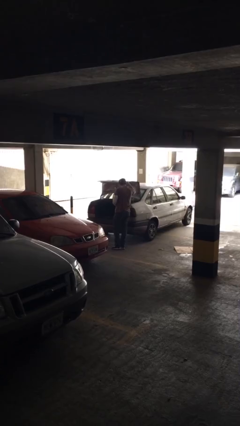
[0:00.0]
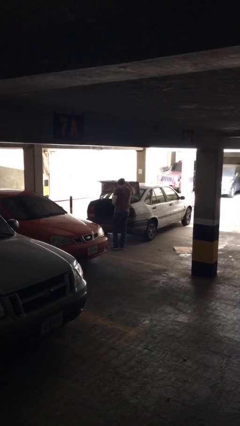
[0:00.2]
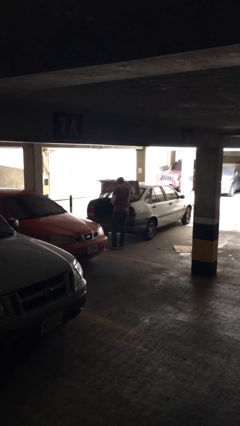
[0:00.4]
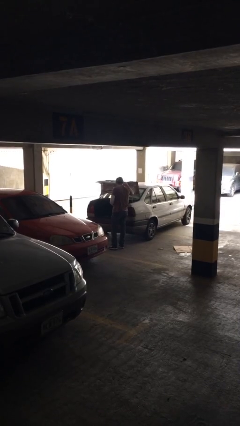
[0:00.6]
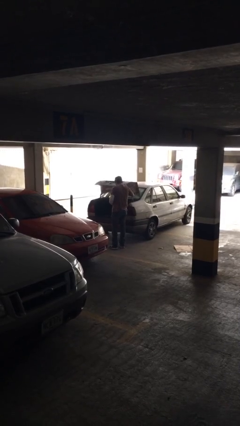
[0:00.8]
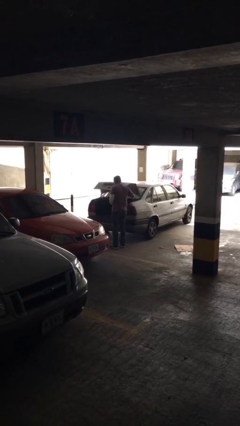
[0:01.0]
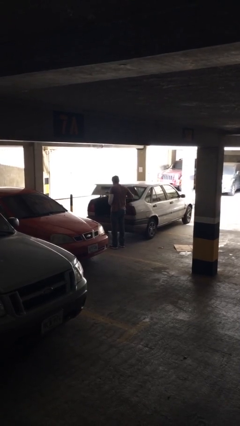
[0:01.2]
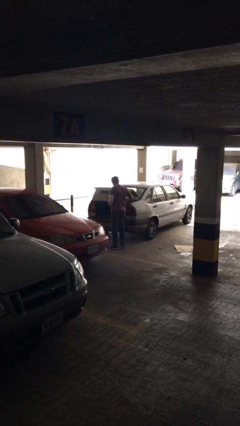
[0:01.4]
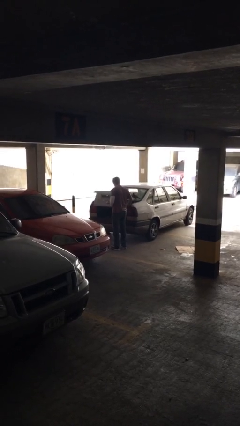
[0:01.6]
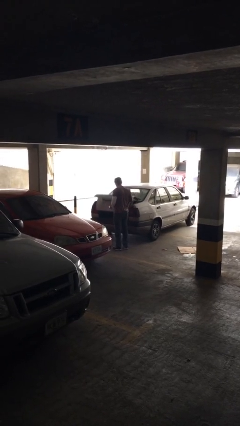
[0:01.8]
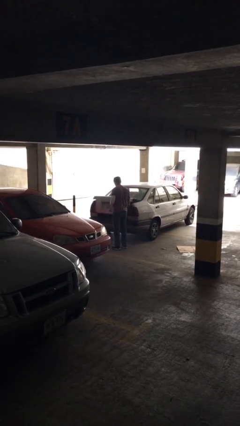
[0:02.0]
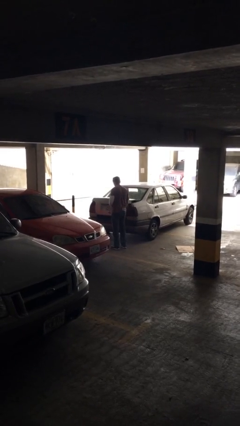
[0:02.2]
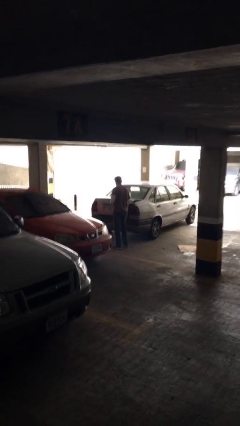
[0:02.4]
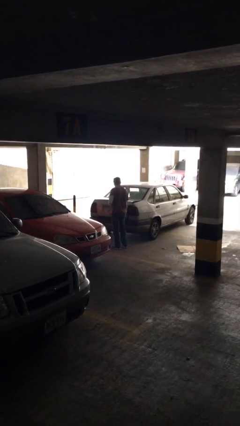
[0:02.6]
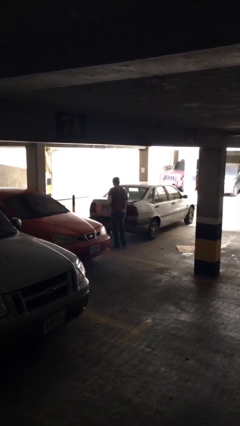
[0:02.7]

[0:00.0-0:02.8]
person closes car trunk

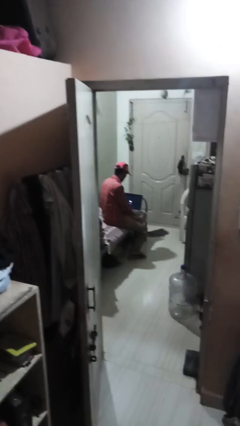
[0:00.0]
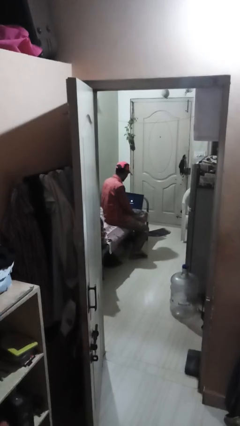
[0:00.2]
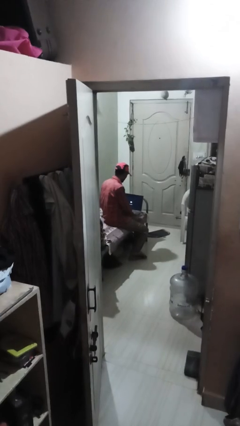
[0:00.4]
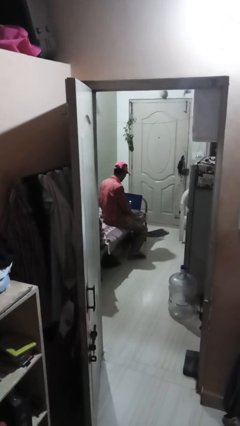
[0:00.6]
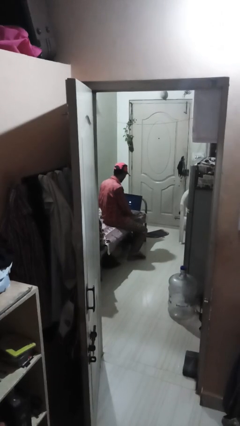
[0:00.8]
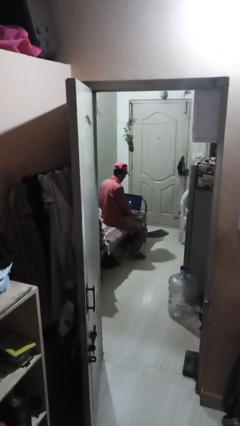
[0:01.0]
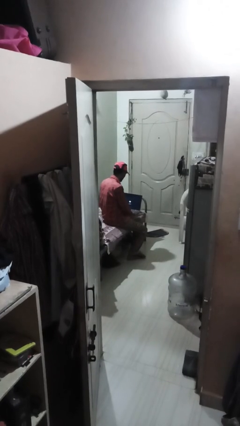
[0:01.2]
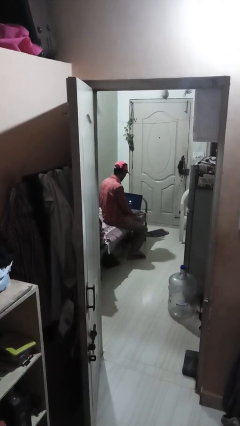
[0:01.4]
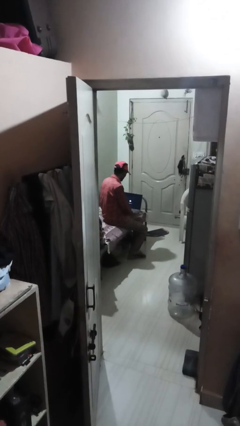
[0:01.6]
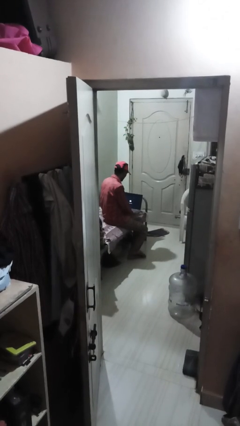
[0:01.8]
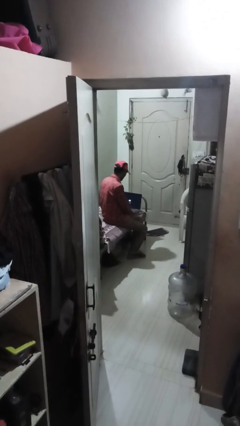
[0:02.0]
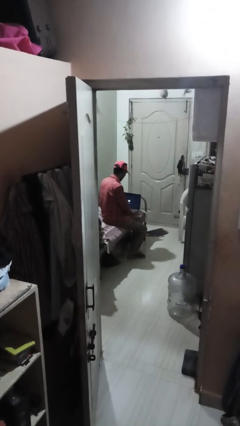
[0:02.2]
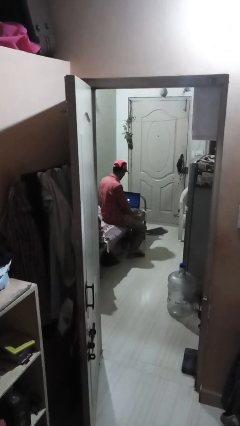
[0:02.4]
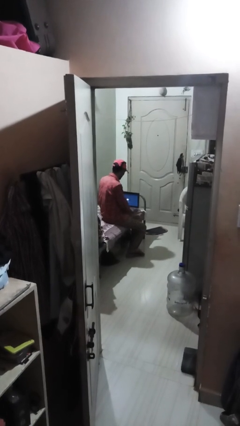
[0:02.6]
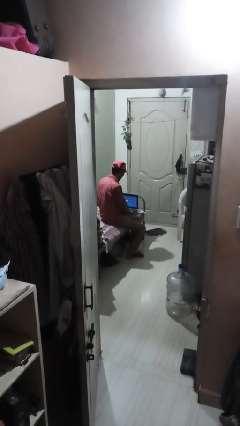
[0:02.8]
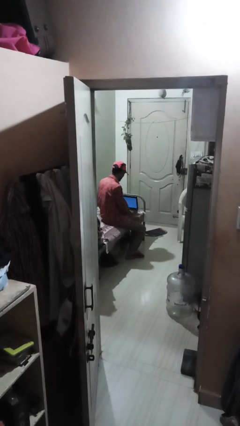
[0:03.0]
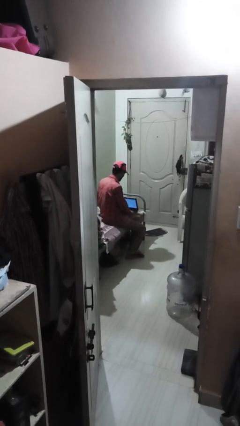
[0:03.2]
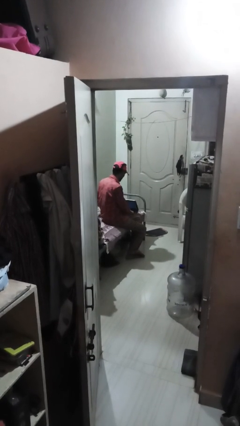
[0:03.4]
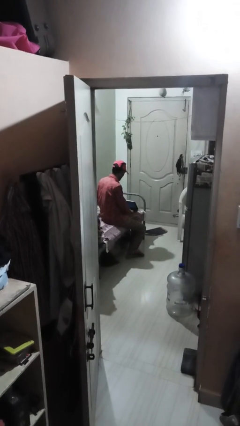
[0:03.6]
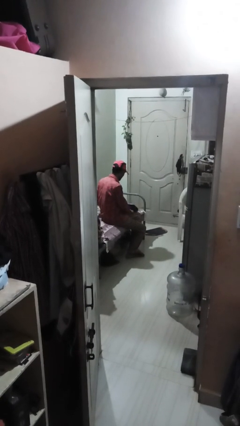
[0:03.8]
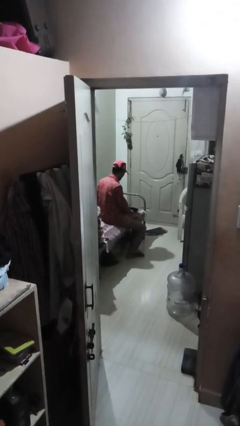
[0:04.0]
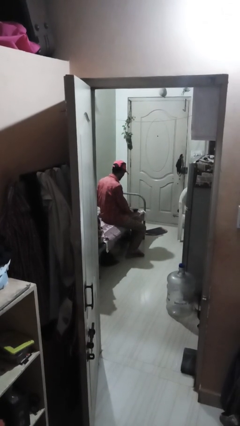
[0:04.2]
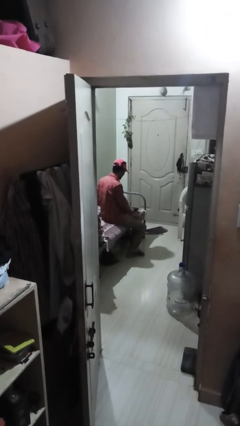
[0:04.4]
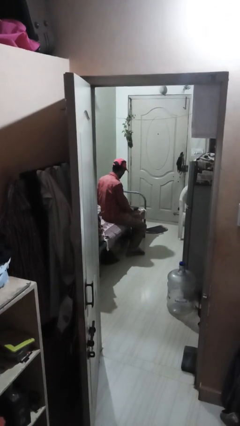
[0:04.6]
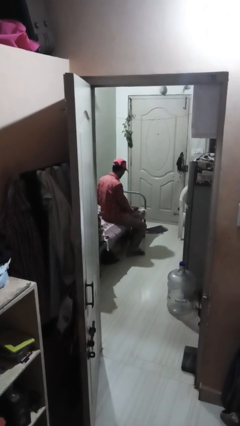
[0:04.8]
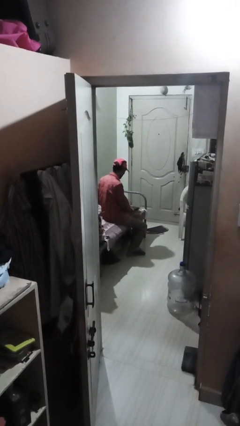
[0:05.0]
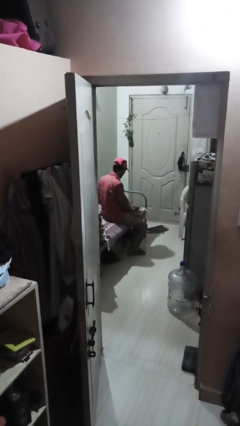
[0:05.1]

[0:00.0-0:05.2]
person closes laptop

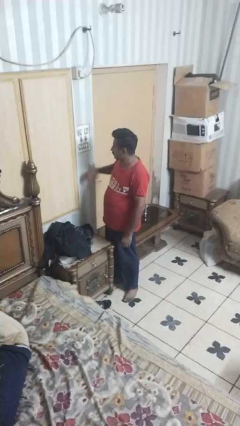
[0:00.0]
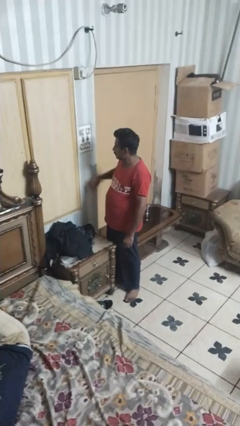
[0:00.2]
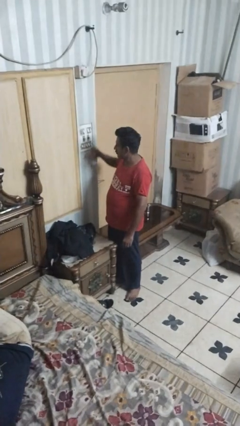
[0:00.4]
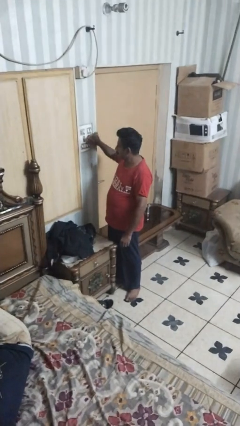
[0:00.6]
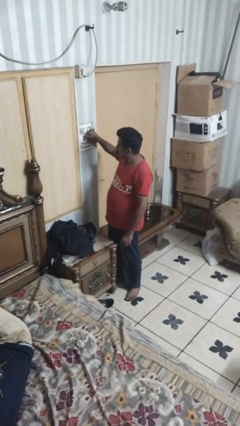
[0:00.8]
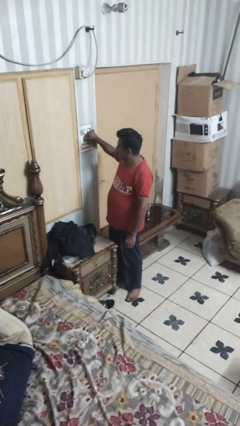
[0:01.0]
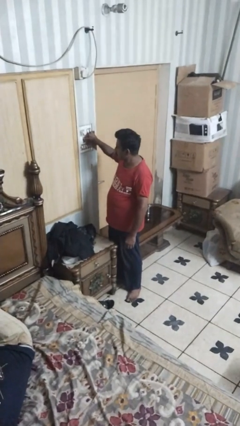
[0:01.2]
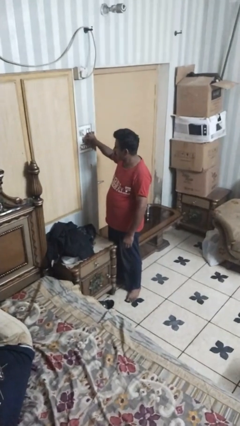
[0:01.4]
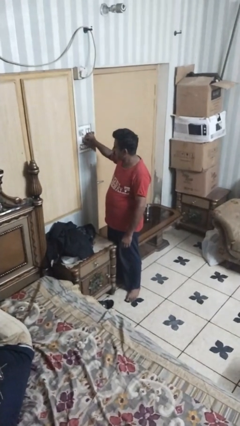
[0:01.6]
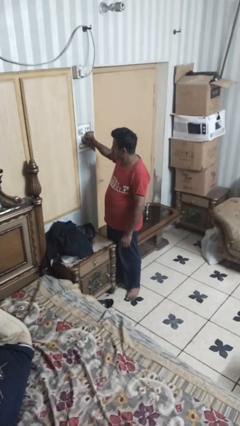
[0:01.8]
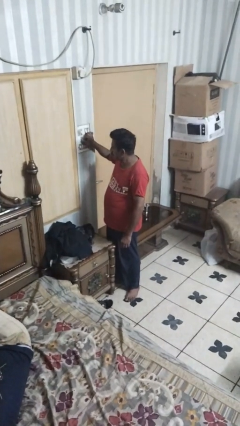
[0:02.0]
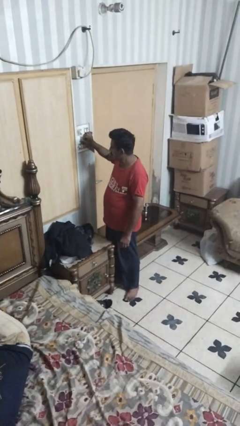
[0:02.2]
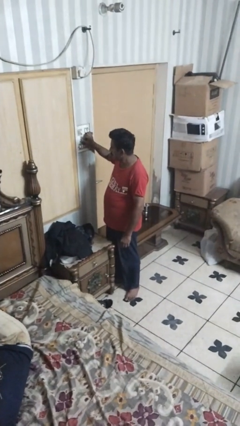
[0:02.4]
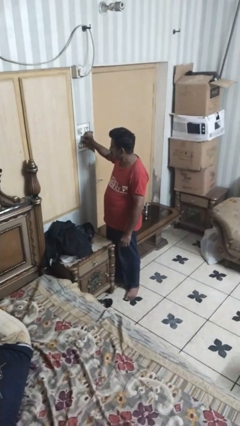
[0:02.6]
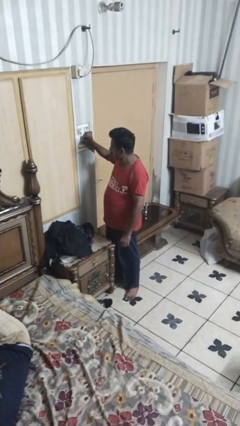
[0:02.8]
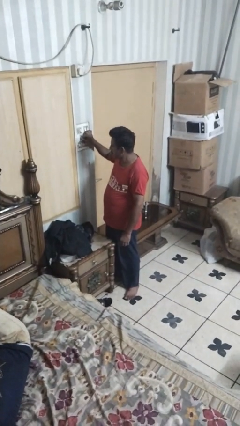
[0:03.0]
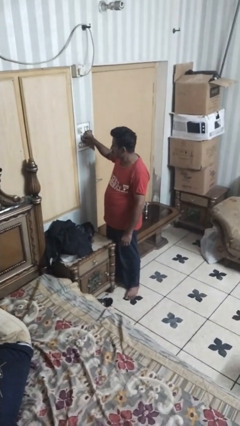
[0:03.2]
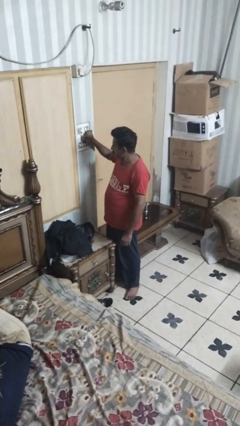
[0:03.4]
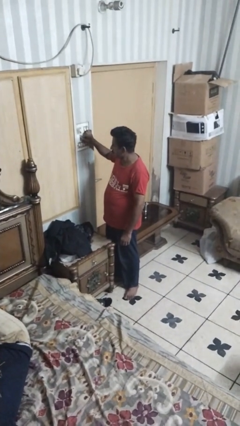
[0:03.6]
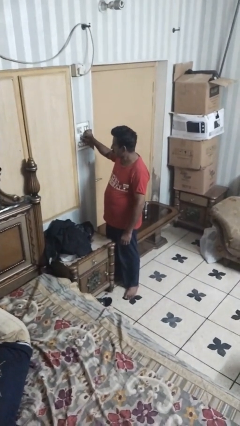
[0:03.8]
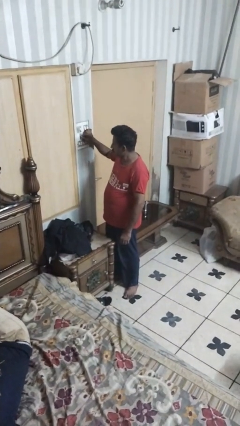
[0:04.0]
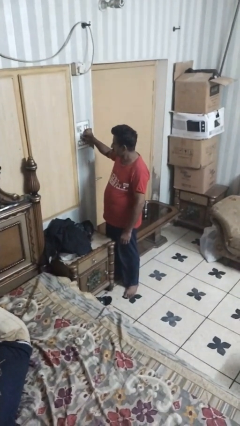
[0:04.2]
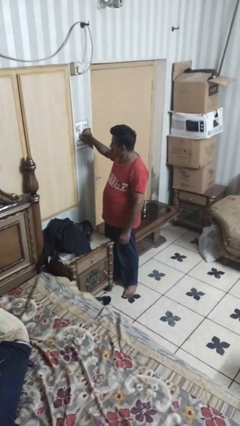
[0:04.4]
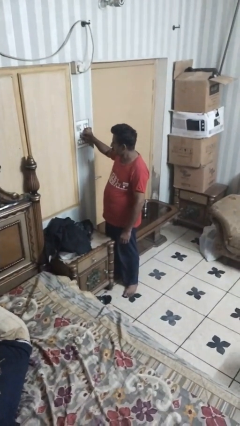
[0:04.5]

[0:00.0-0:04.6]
person adjusts thermostat

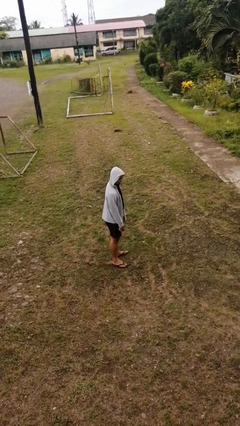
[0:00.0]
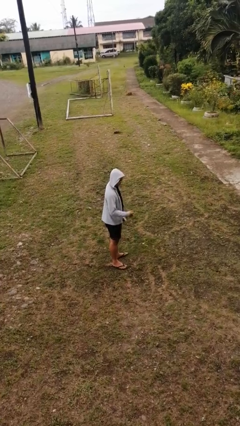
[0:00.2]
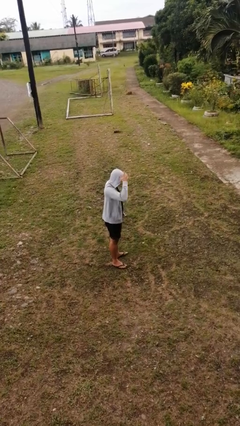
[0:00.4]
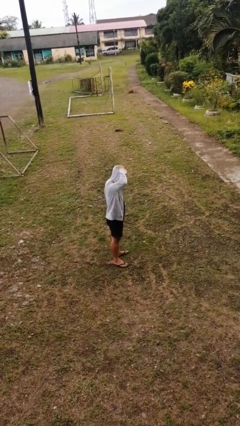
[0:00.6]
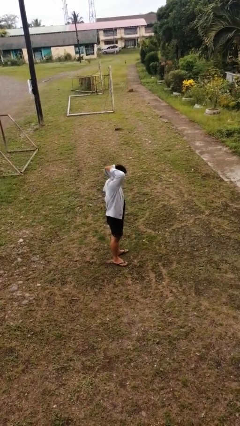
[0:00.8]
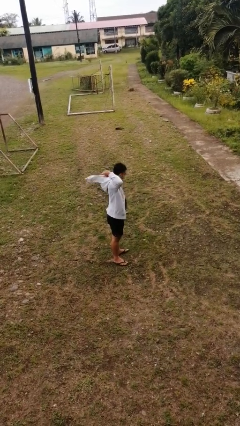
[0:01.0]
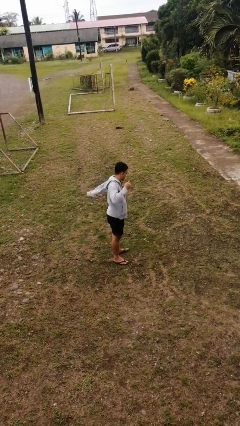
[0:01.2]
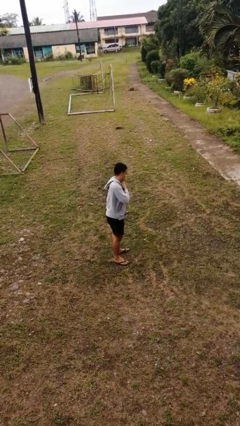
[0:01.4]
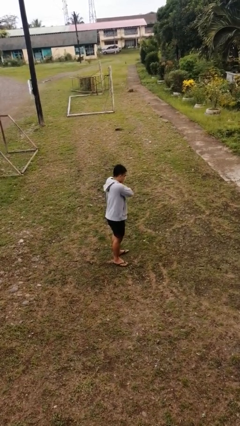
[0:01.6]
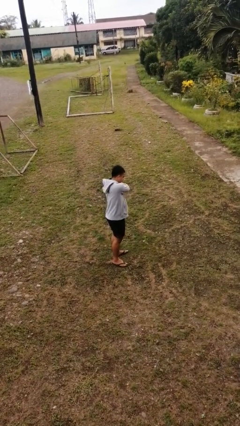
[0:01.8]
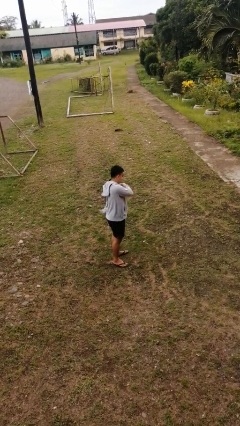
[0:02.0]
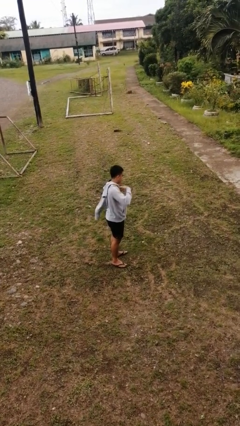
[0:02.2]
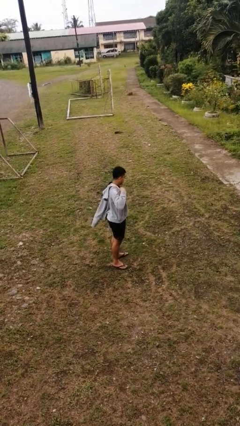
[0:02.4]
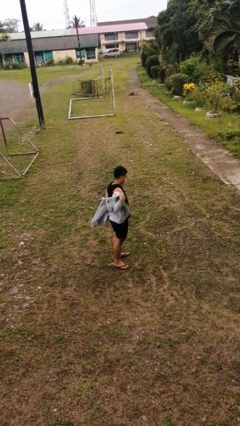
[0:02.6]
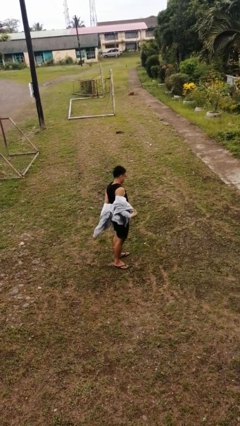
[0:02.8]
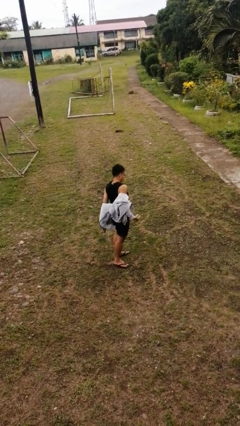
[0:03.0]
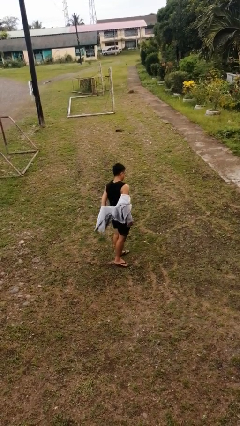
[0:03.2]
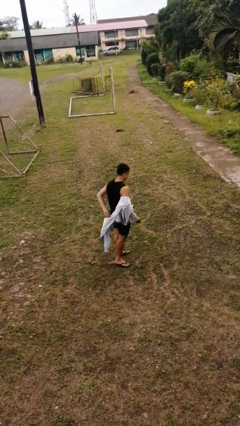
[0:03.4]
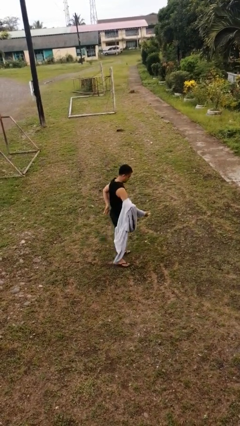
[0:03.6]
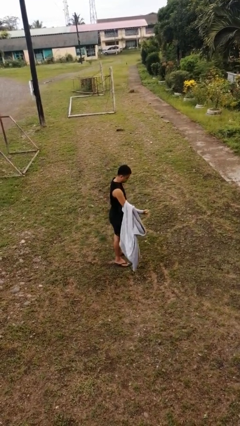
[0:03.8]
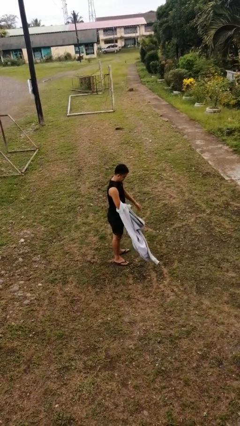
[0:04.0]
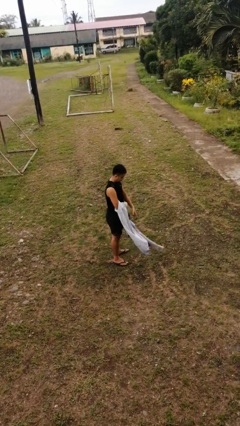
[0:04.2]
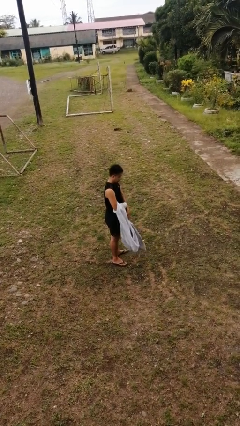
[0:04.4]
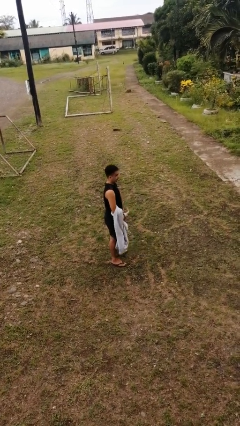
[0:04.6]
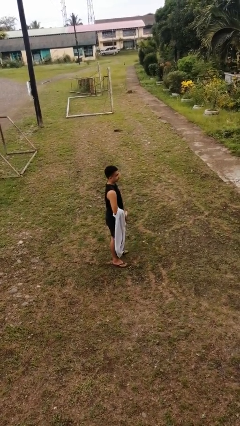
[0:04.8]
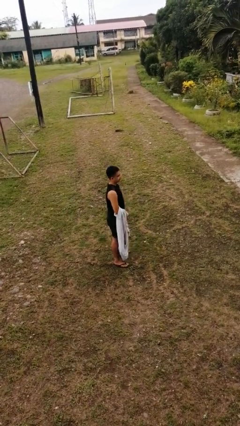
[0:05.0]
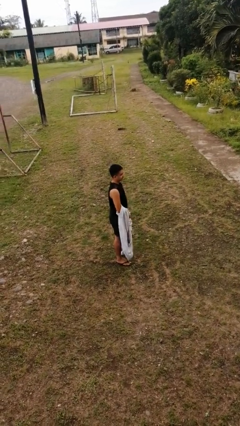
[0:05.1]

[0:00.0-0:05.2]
person takes off hoodie

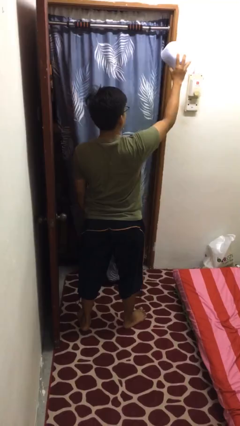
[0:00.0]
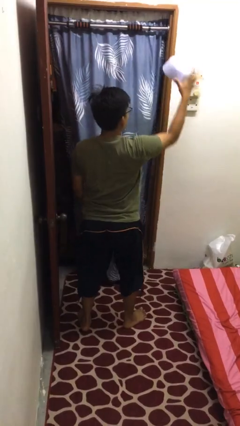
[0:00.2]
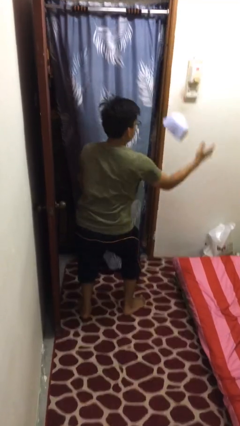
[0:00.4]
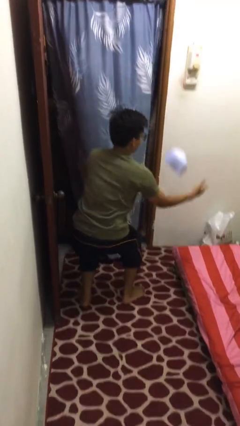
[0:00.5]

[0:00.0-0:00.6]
person drops object
